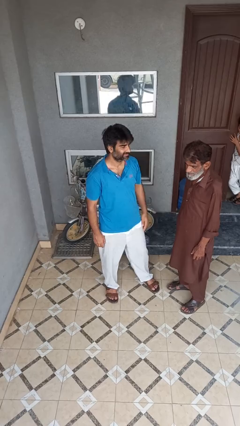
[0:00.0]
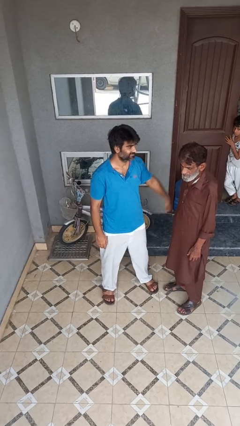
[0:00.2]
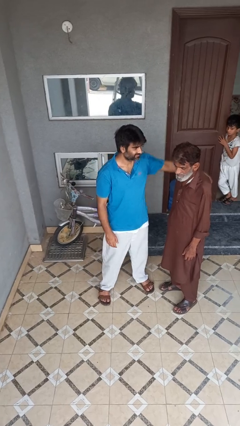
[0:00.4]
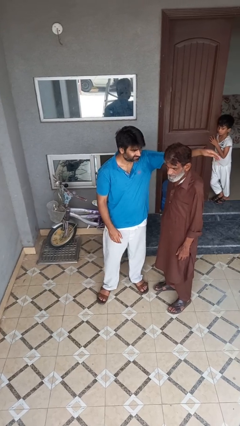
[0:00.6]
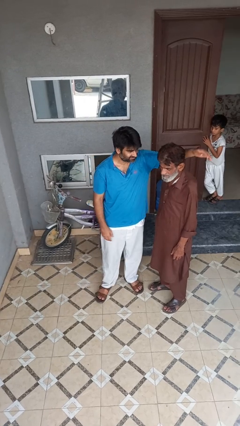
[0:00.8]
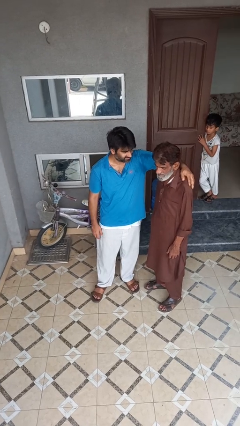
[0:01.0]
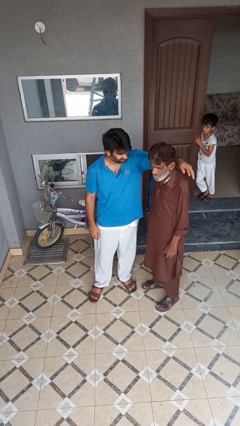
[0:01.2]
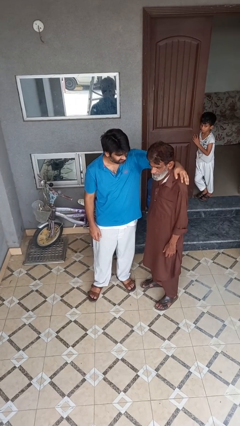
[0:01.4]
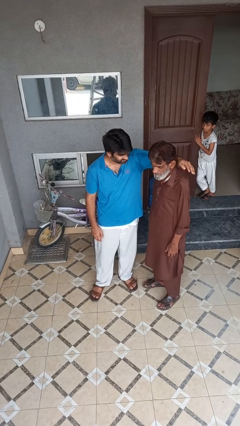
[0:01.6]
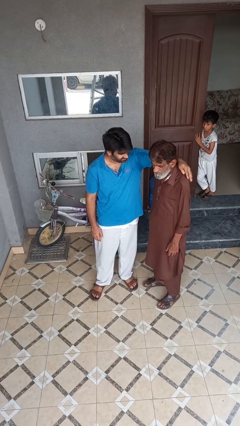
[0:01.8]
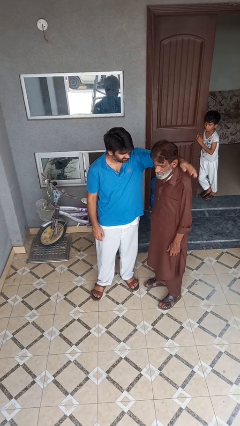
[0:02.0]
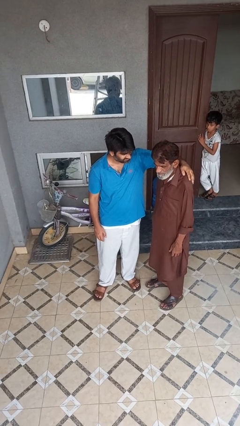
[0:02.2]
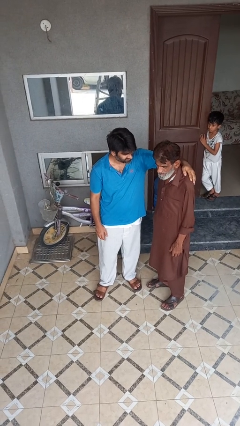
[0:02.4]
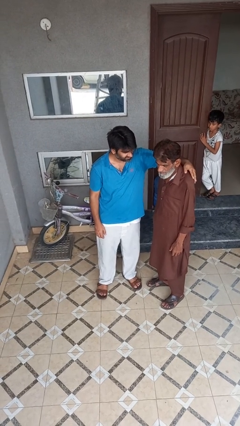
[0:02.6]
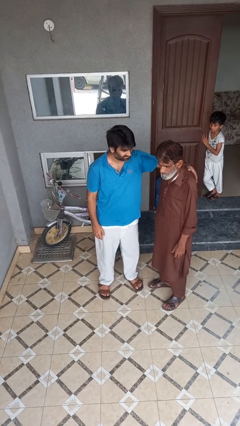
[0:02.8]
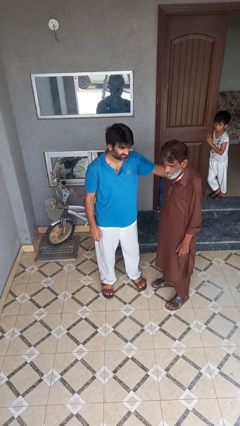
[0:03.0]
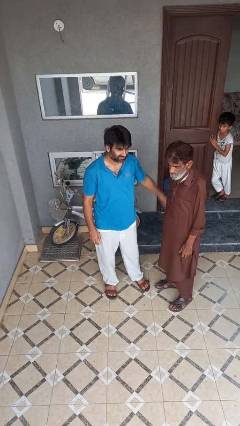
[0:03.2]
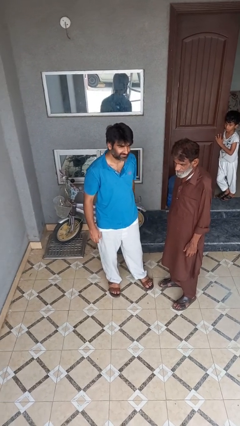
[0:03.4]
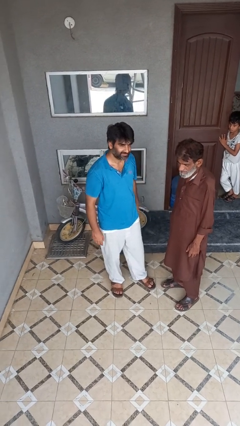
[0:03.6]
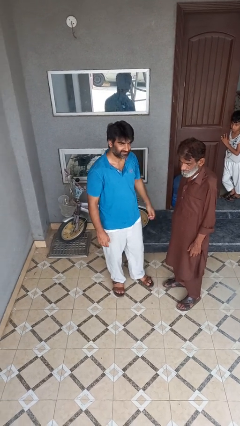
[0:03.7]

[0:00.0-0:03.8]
person pounds shoulders of person

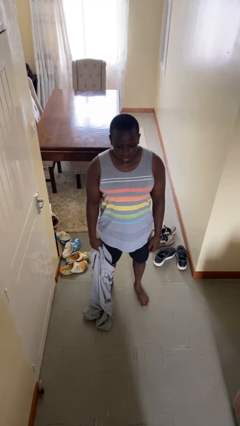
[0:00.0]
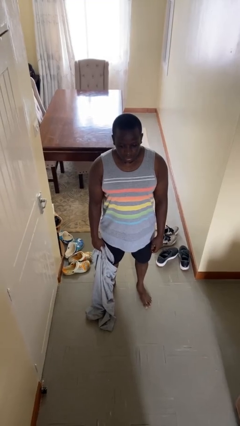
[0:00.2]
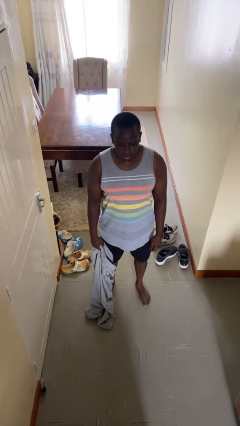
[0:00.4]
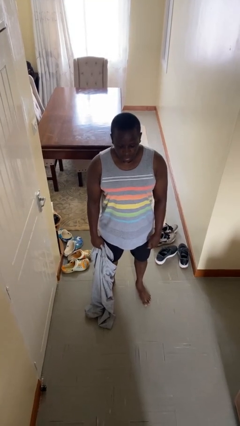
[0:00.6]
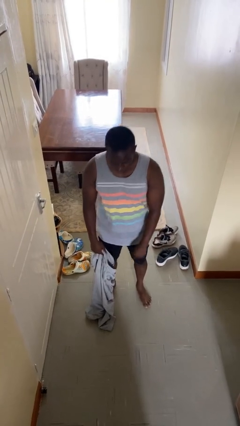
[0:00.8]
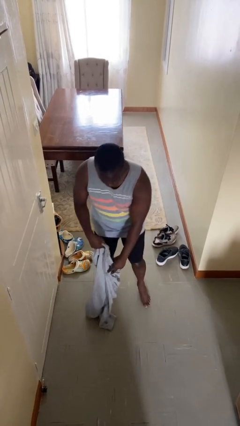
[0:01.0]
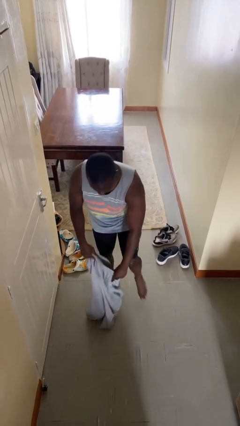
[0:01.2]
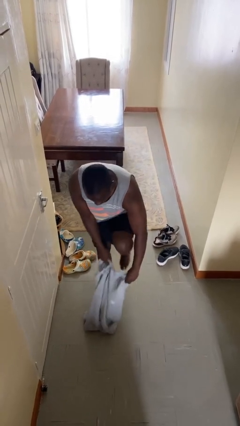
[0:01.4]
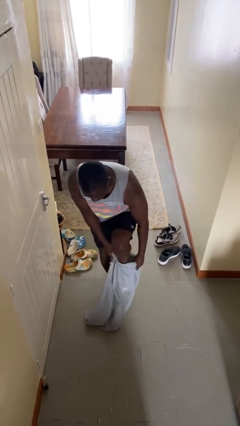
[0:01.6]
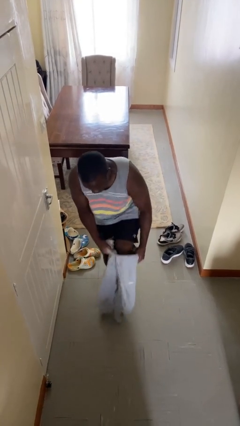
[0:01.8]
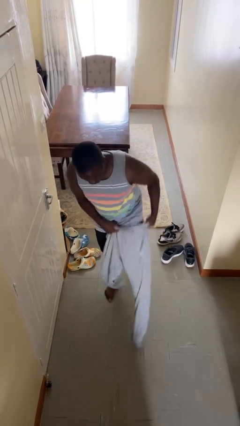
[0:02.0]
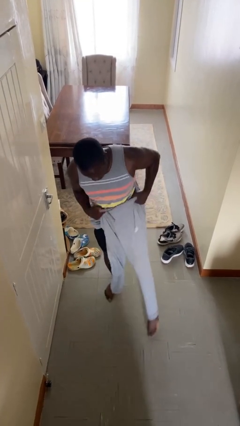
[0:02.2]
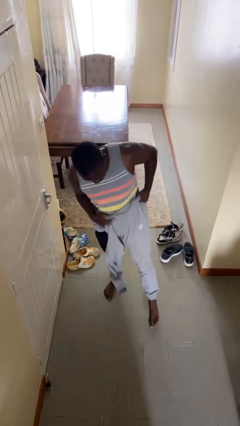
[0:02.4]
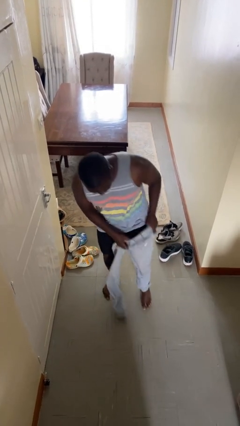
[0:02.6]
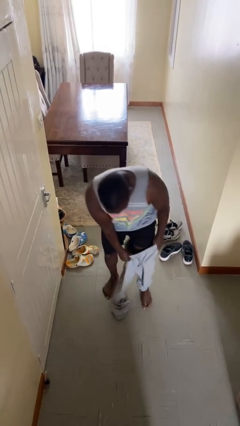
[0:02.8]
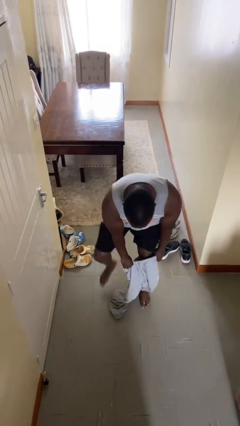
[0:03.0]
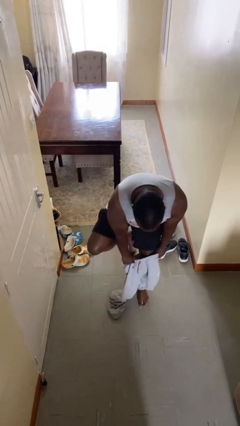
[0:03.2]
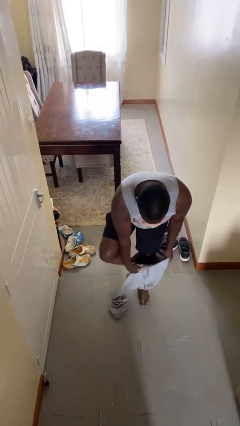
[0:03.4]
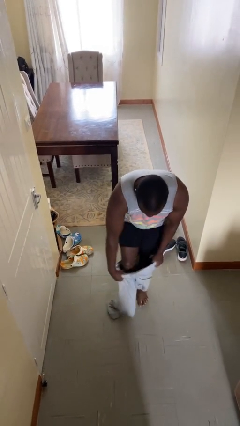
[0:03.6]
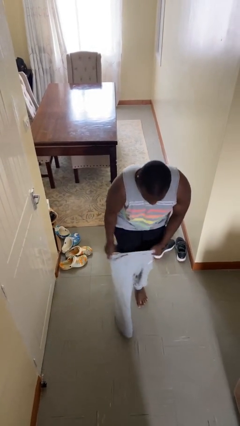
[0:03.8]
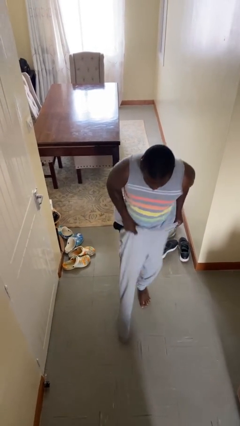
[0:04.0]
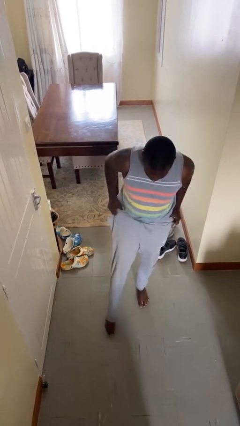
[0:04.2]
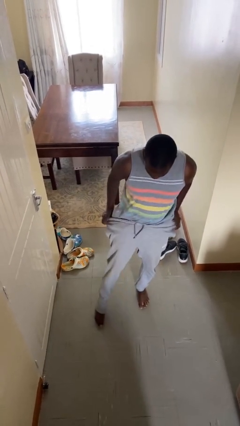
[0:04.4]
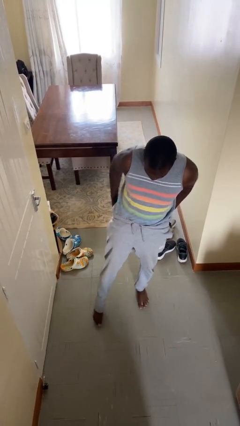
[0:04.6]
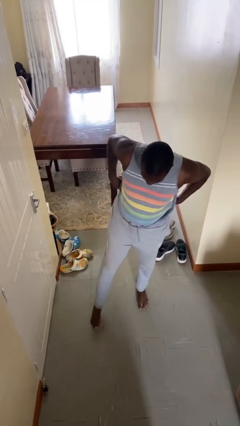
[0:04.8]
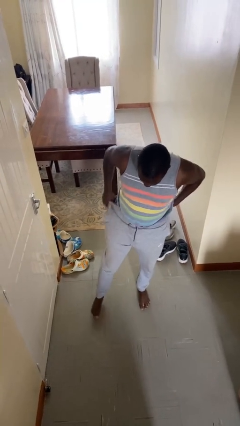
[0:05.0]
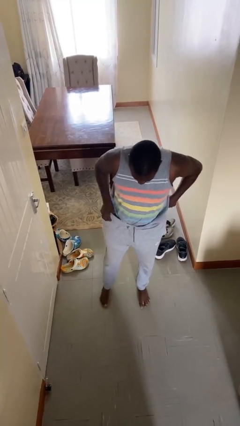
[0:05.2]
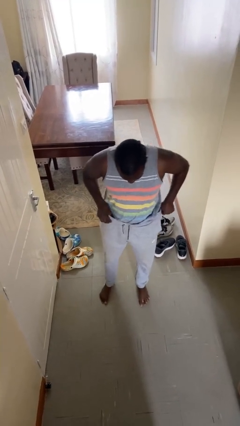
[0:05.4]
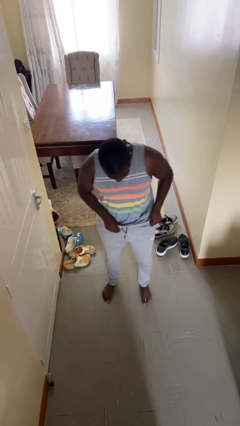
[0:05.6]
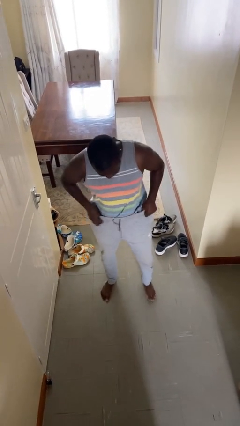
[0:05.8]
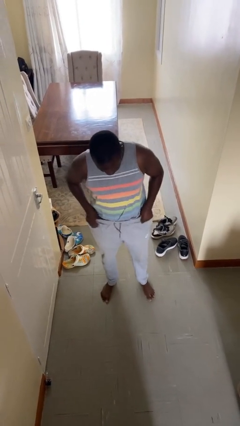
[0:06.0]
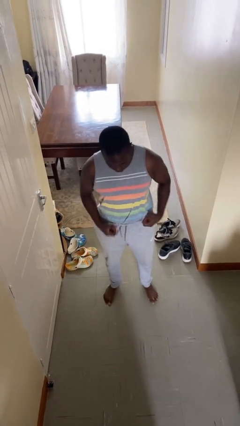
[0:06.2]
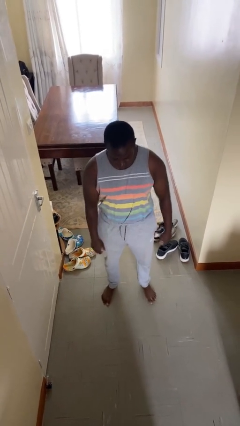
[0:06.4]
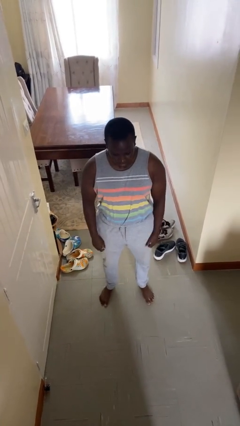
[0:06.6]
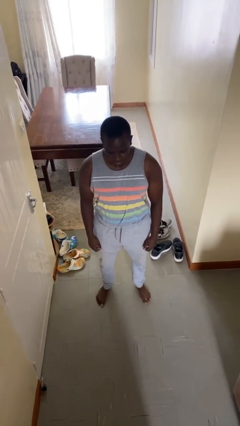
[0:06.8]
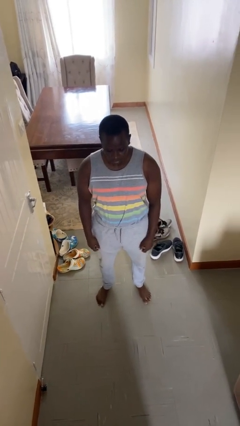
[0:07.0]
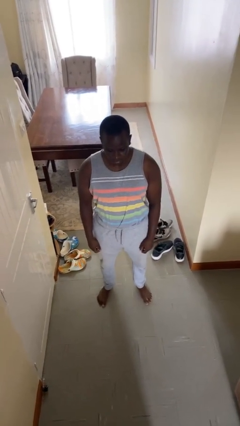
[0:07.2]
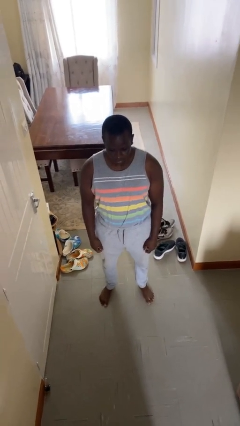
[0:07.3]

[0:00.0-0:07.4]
person puts on pants

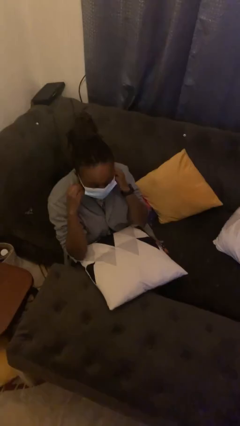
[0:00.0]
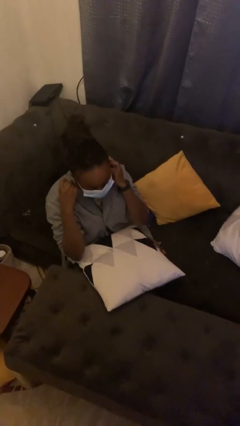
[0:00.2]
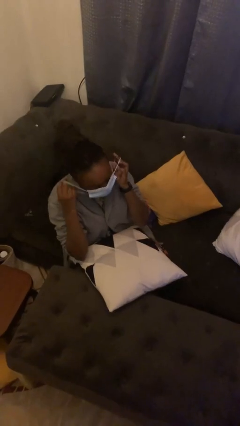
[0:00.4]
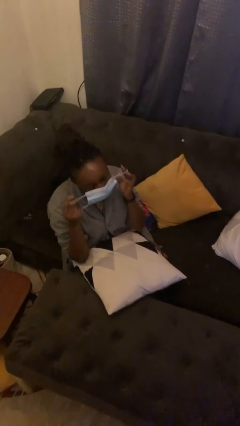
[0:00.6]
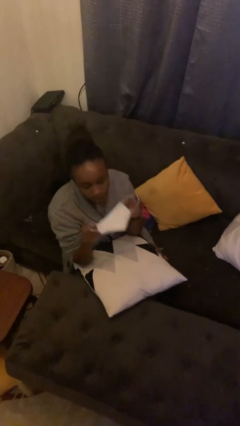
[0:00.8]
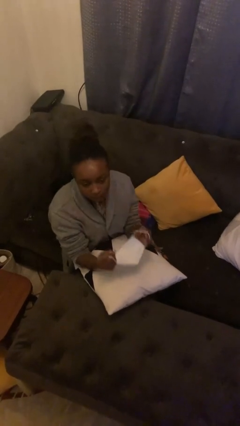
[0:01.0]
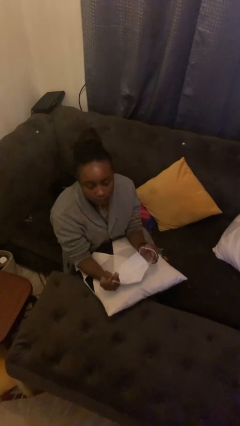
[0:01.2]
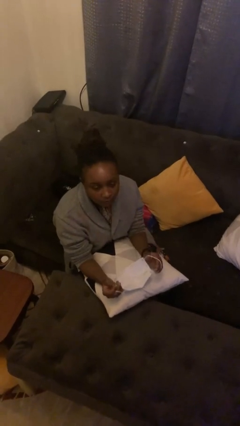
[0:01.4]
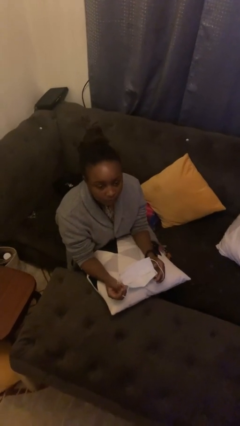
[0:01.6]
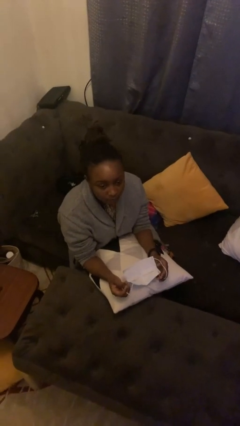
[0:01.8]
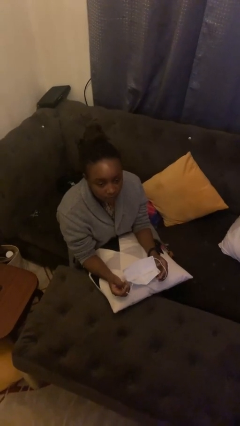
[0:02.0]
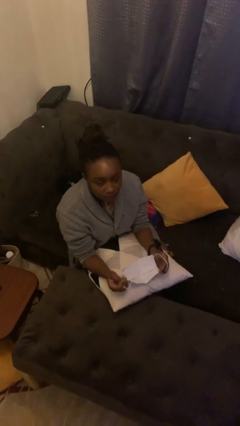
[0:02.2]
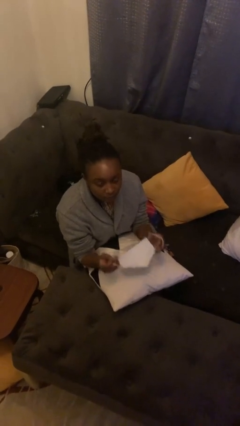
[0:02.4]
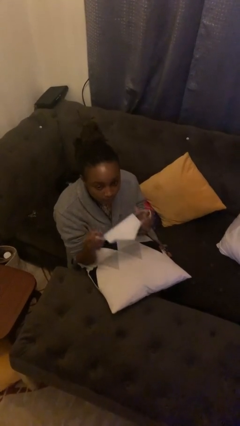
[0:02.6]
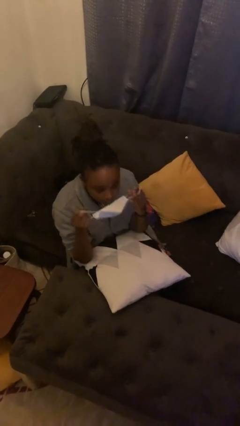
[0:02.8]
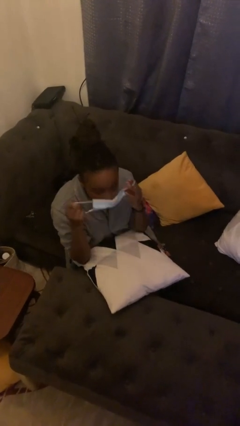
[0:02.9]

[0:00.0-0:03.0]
person takes off facemask

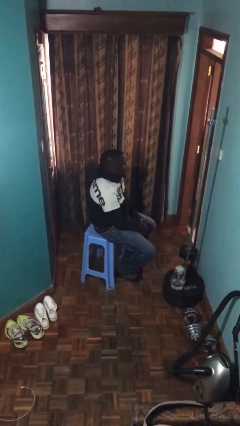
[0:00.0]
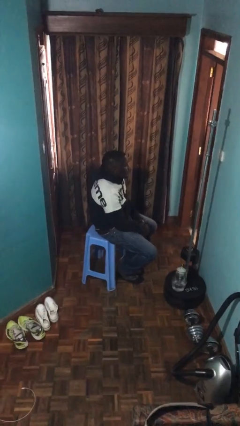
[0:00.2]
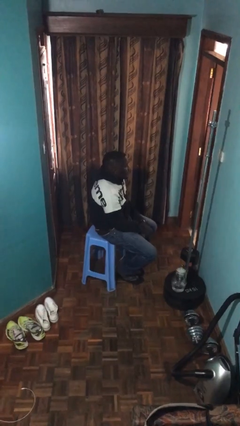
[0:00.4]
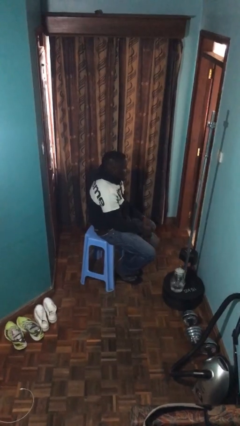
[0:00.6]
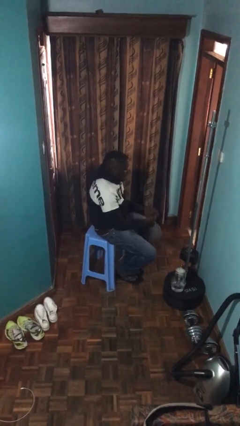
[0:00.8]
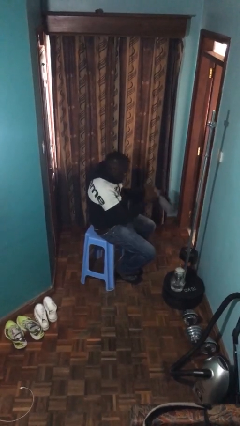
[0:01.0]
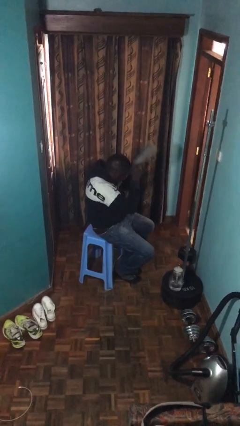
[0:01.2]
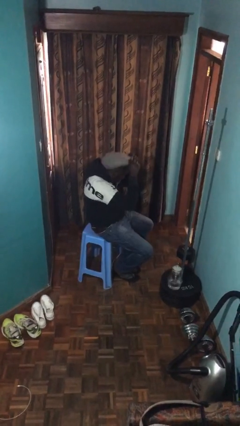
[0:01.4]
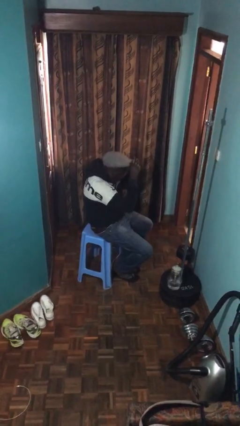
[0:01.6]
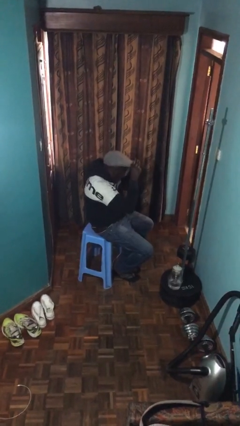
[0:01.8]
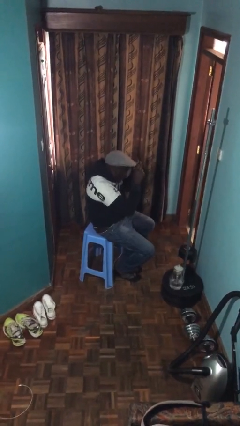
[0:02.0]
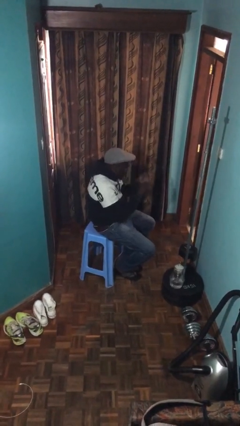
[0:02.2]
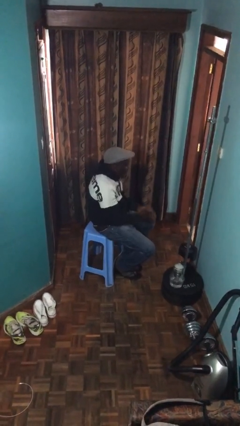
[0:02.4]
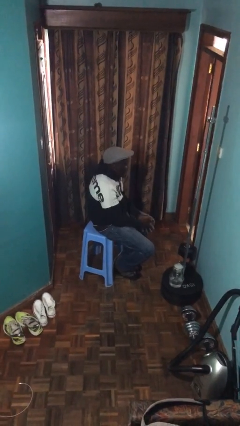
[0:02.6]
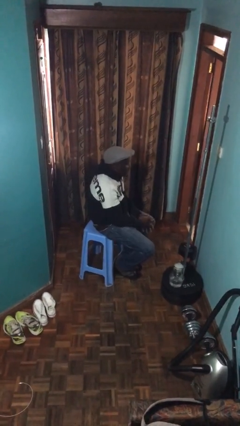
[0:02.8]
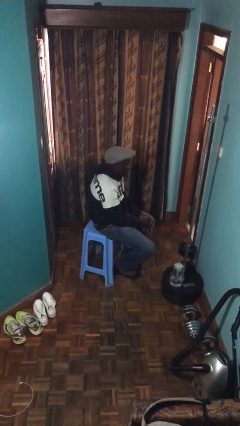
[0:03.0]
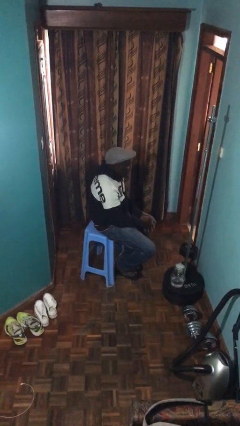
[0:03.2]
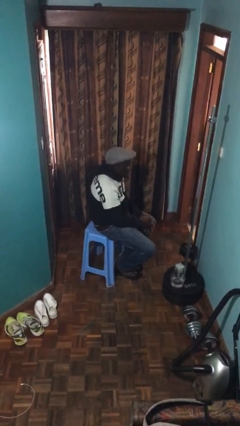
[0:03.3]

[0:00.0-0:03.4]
person puts on hat
